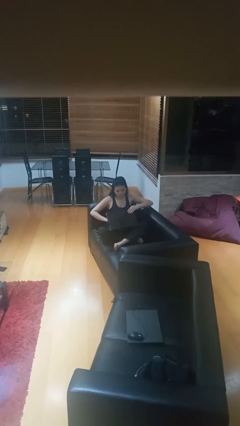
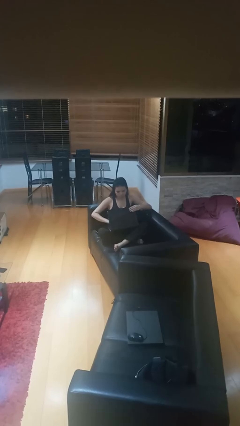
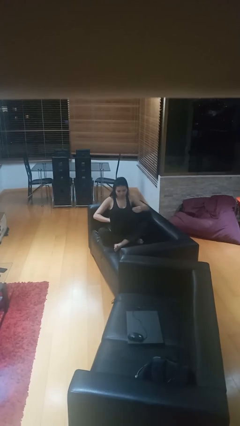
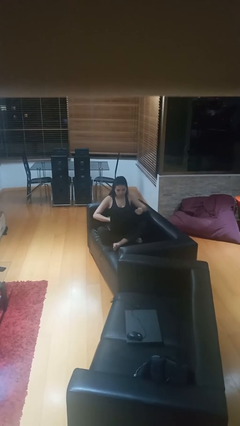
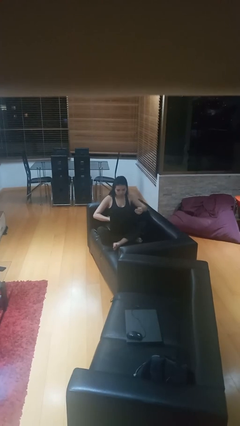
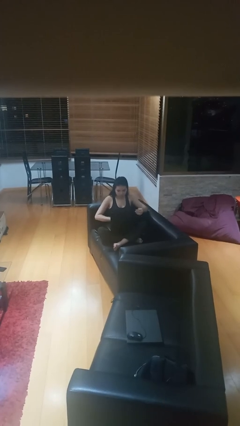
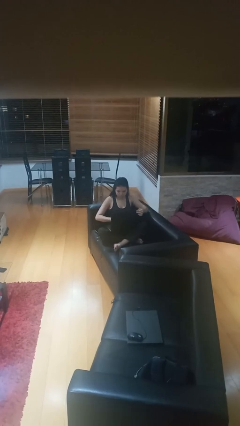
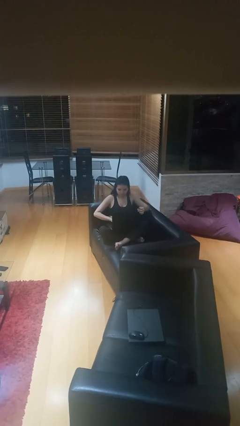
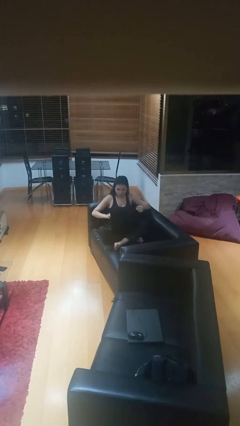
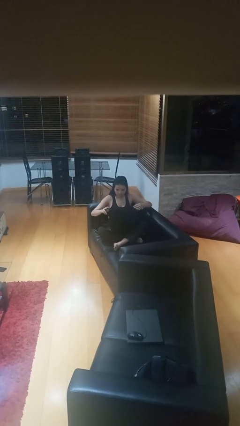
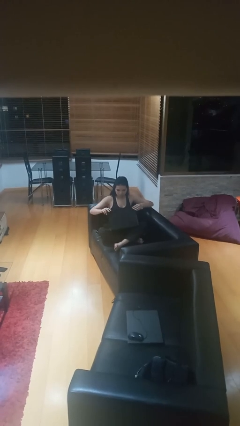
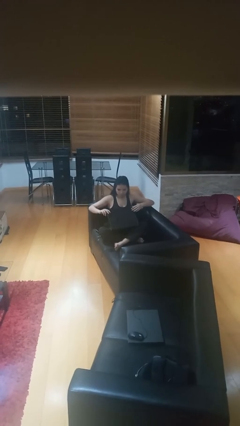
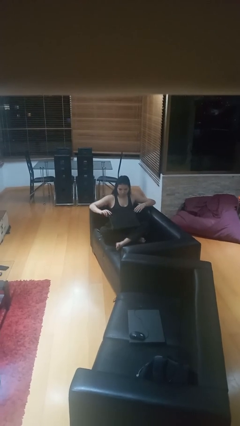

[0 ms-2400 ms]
person interacts with laptop

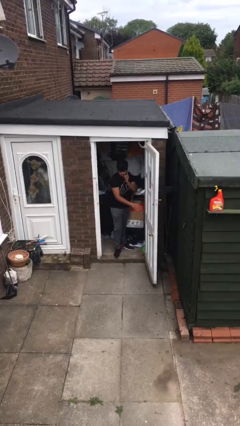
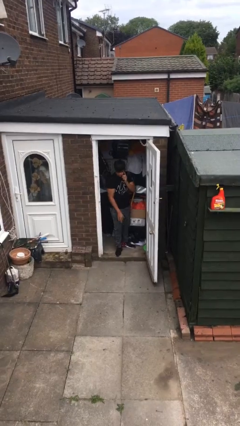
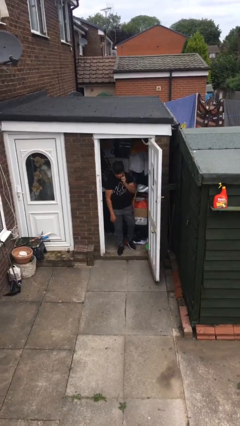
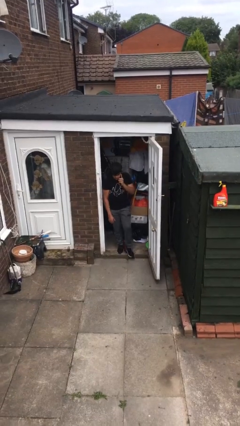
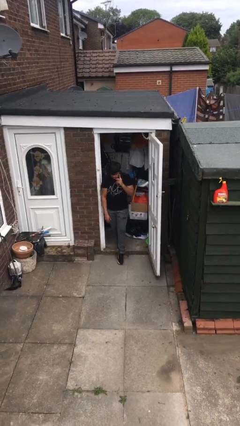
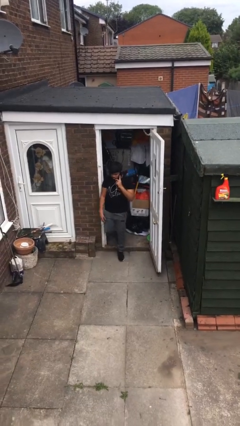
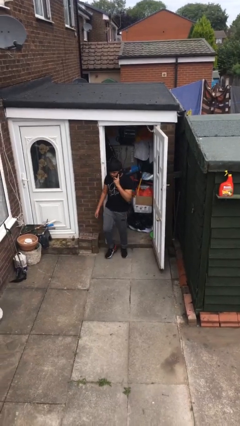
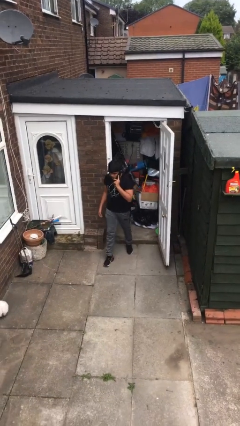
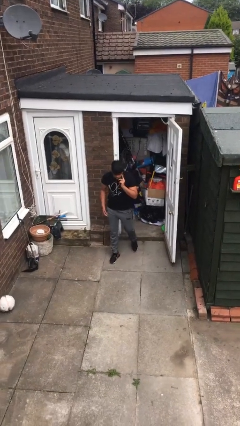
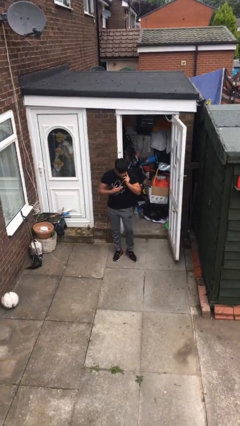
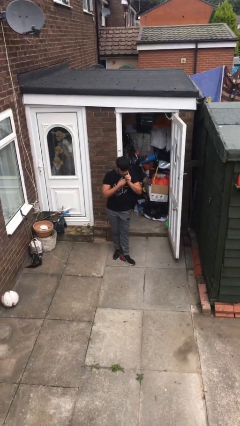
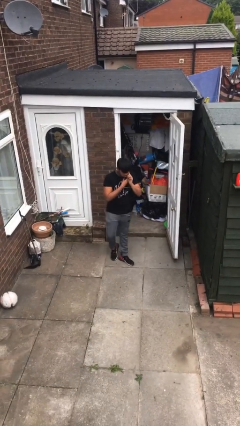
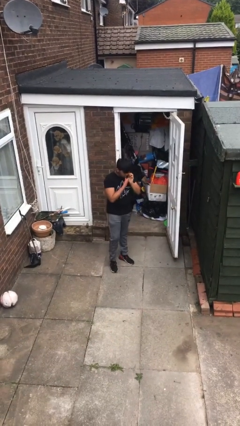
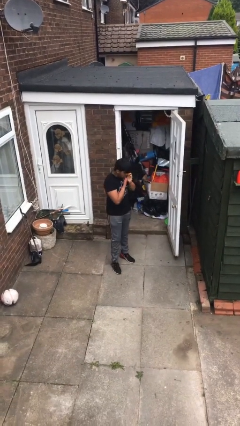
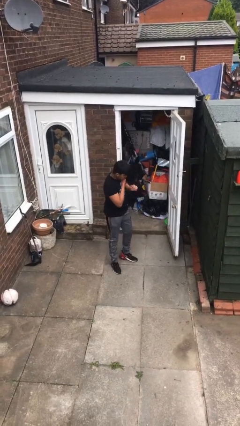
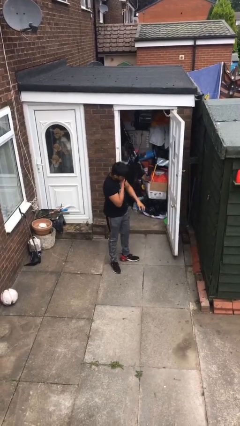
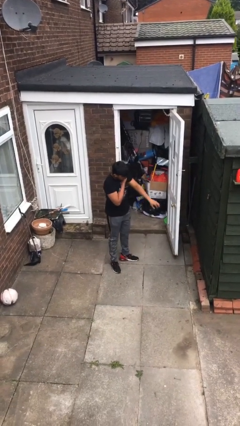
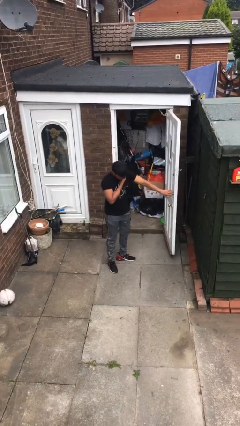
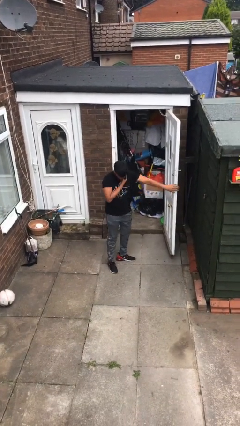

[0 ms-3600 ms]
person enters scene through structure

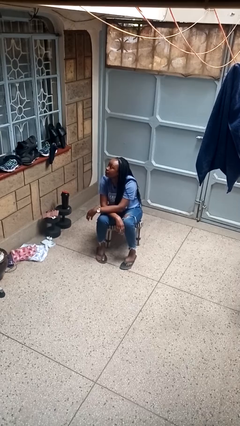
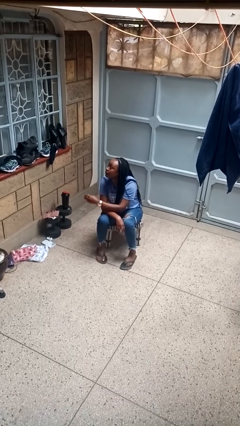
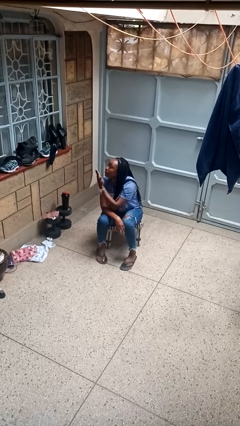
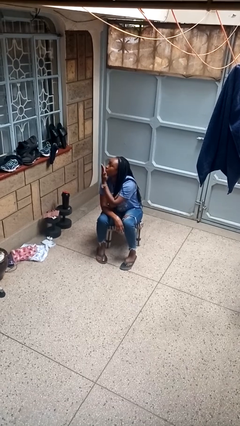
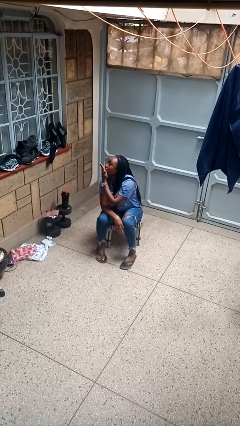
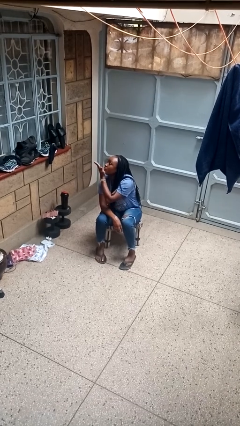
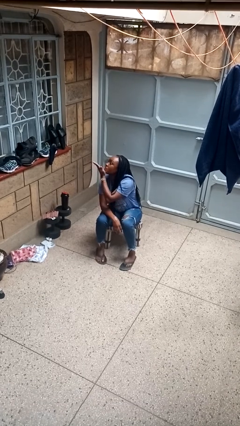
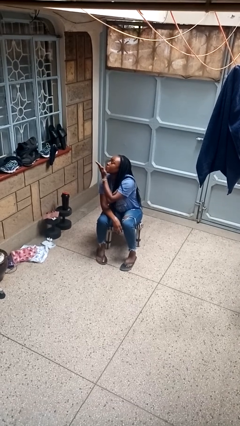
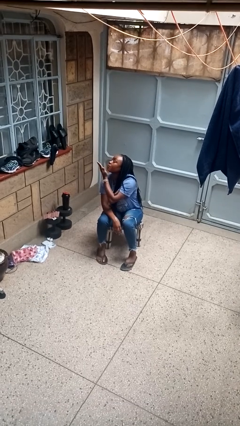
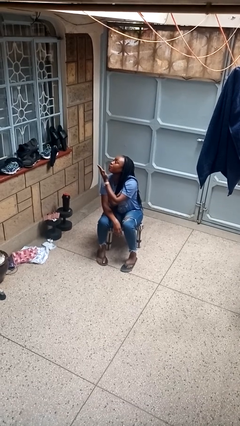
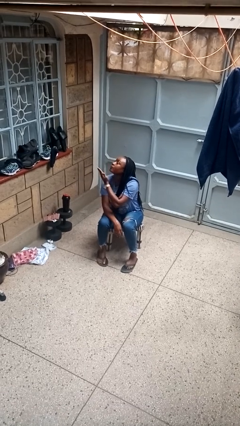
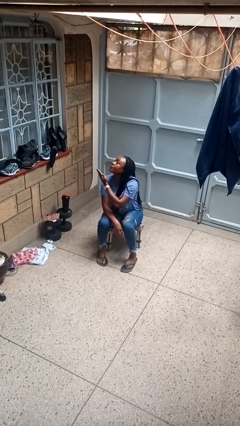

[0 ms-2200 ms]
person gestures blow kiss

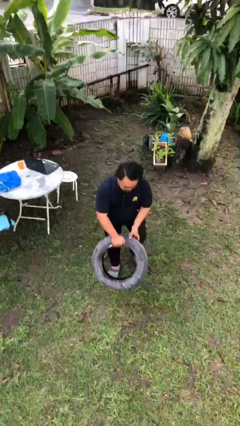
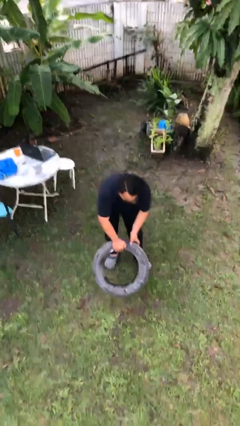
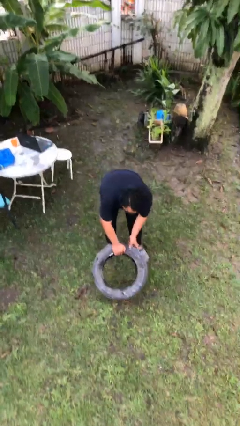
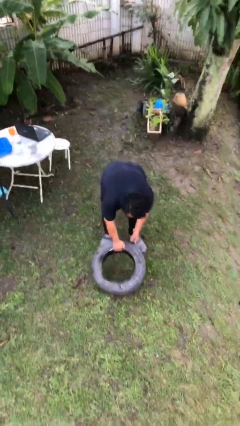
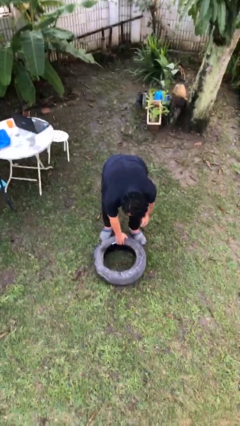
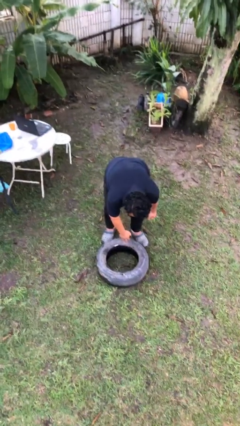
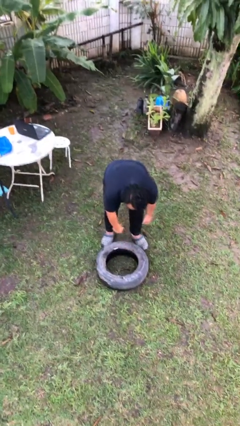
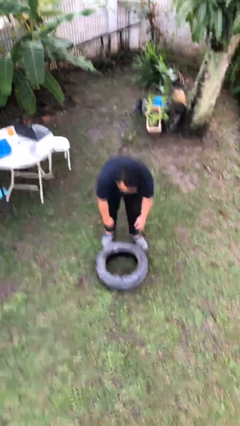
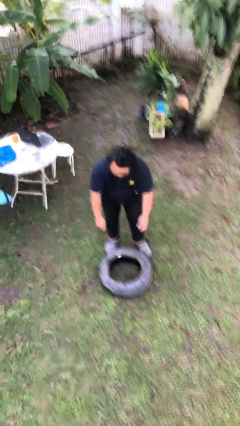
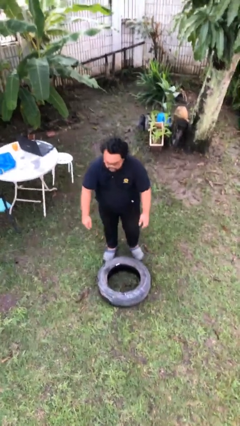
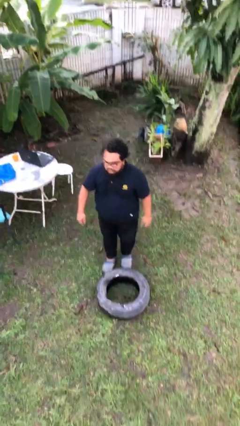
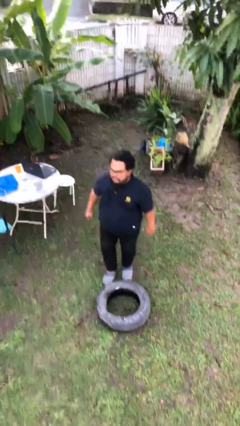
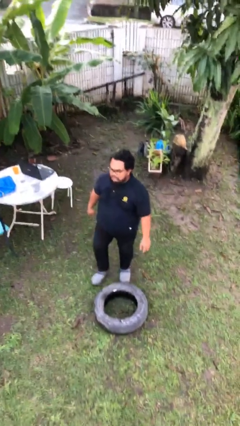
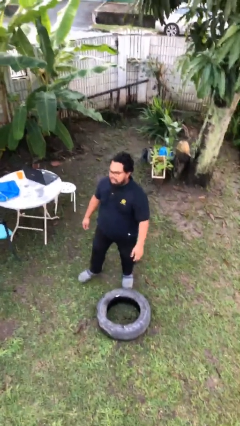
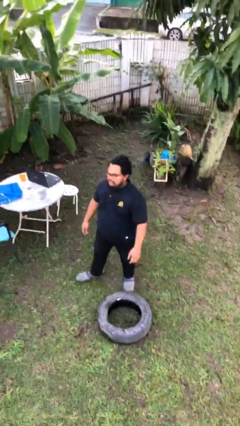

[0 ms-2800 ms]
person puts down object on floor

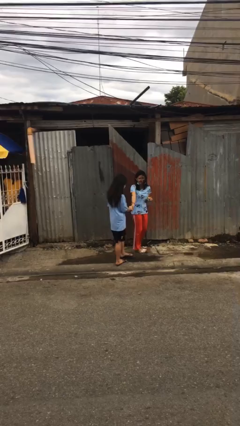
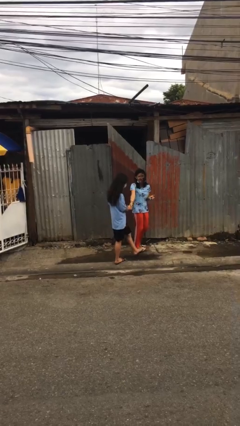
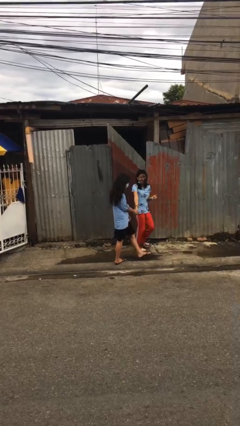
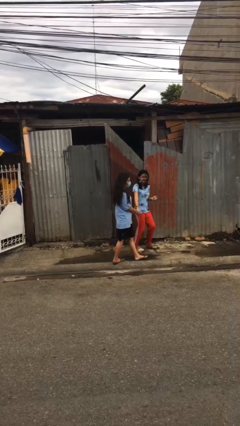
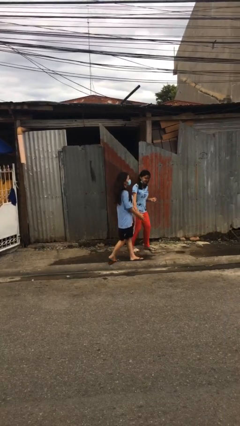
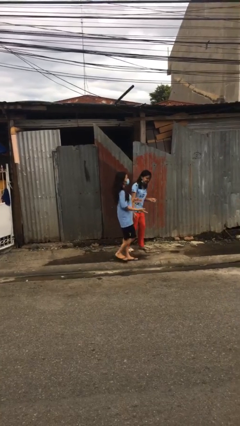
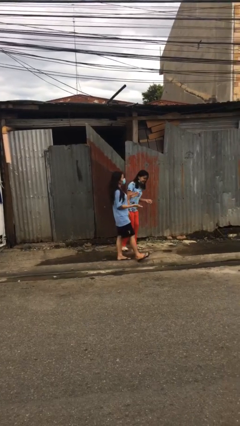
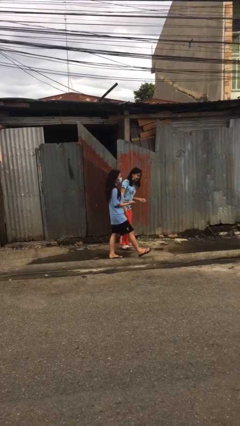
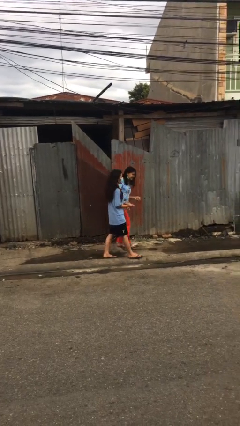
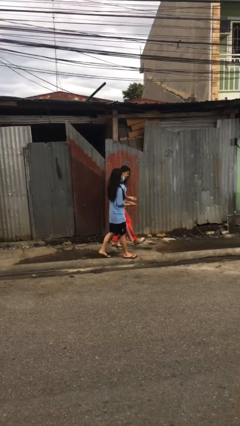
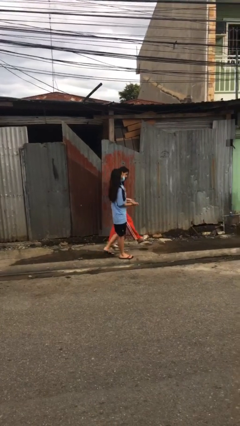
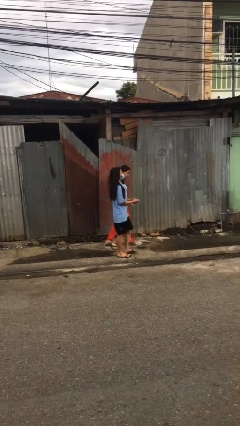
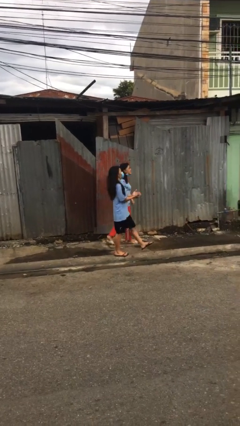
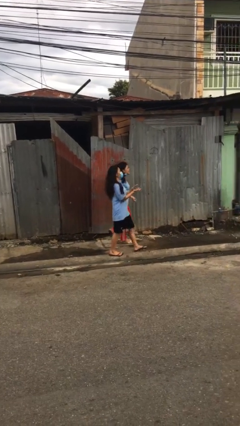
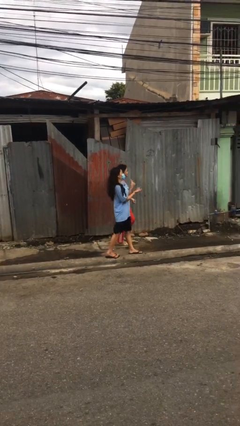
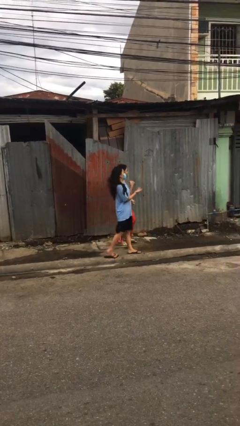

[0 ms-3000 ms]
person talks to person

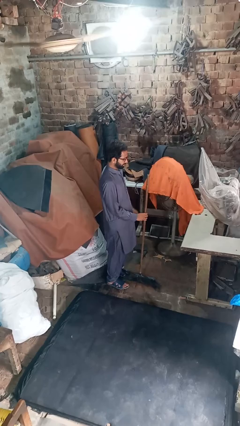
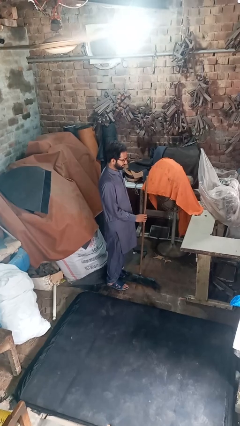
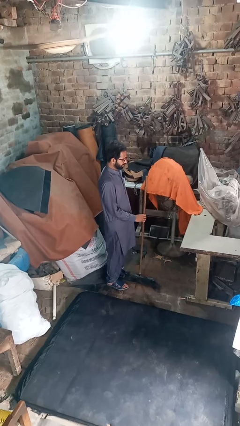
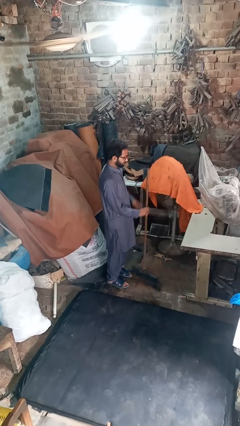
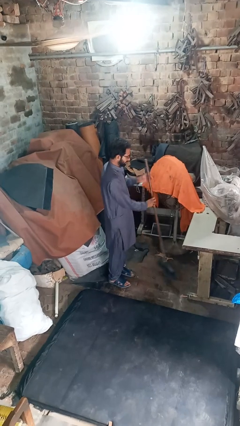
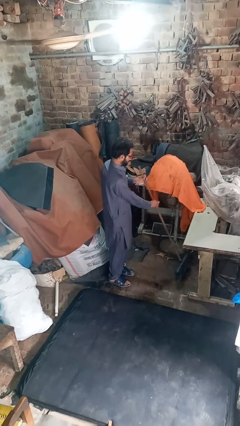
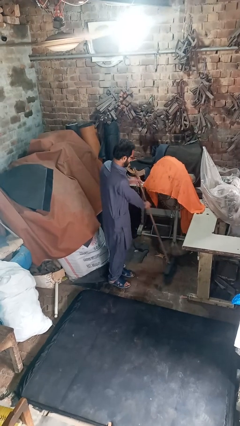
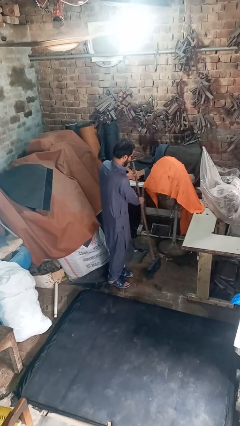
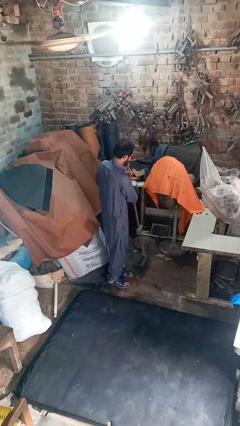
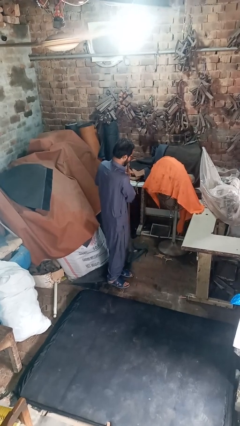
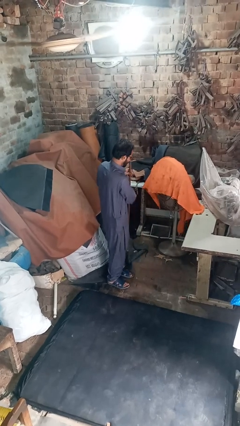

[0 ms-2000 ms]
person sweeps floor

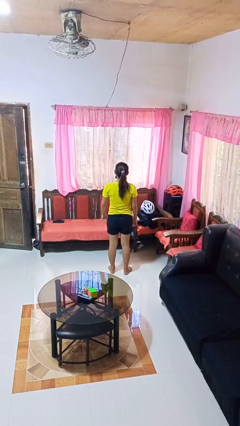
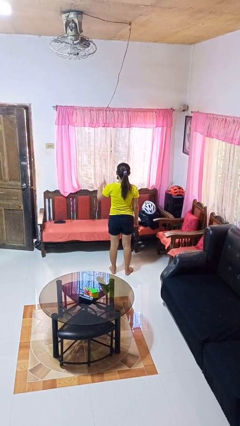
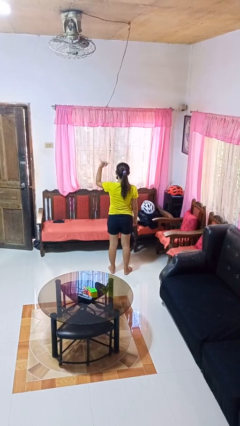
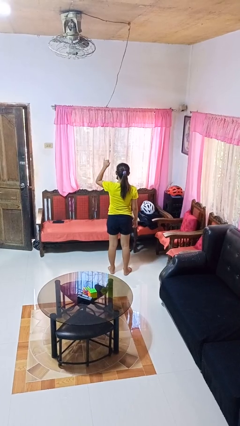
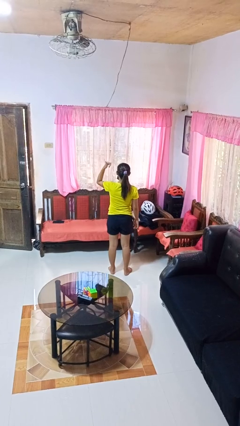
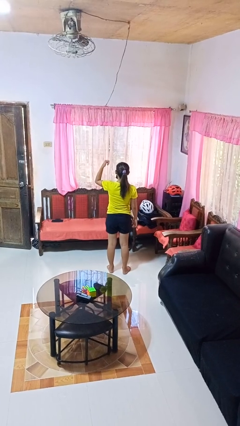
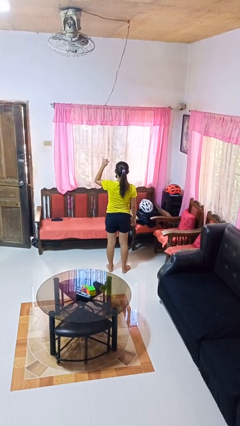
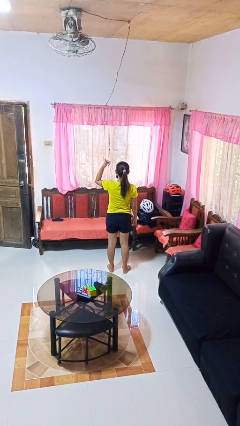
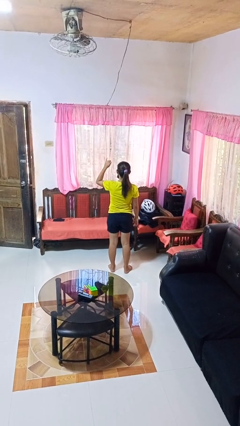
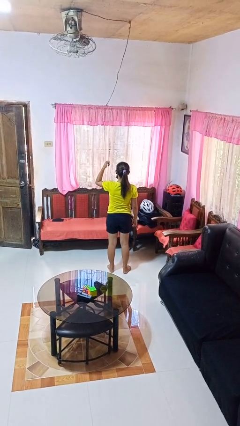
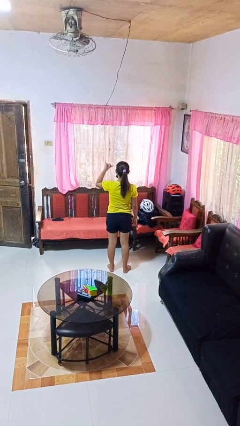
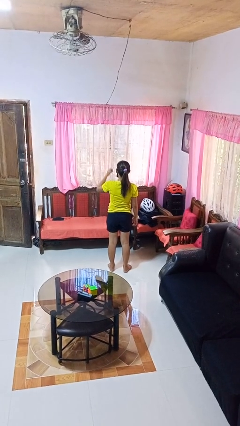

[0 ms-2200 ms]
person gestures hang loose
